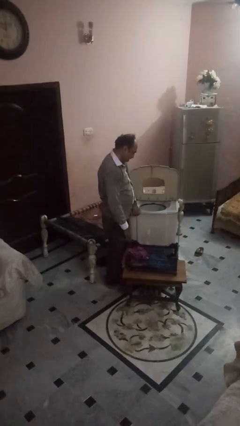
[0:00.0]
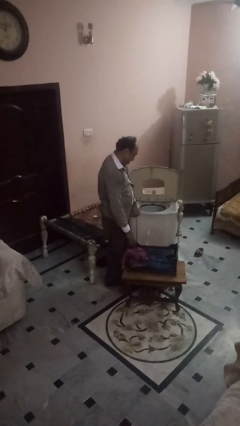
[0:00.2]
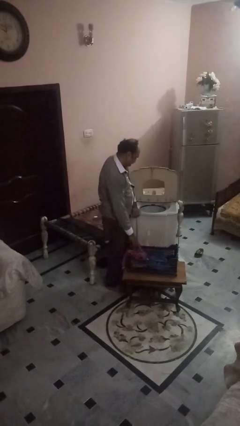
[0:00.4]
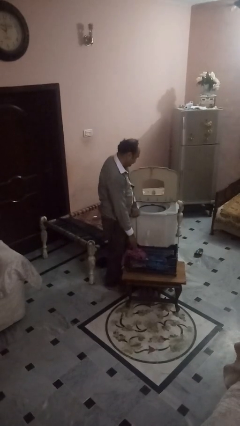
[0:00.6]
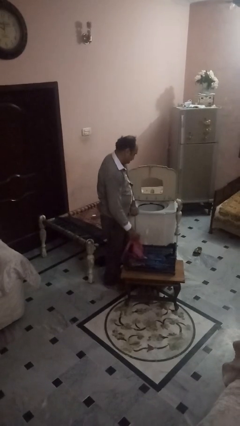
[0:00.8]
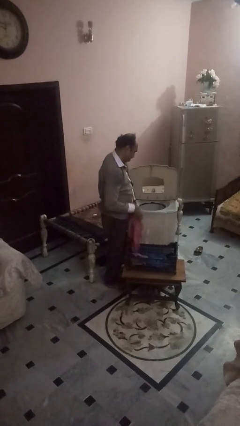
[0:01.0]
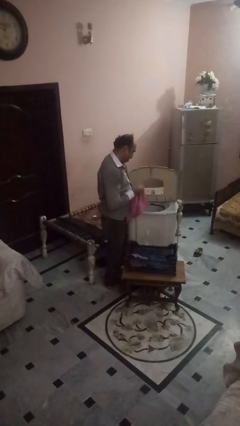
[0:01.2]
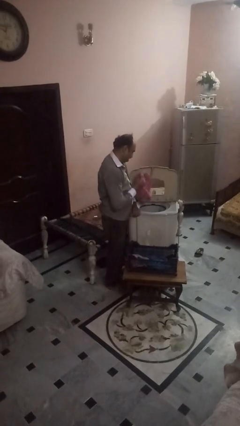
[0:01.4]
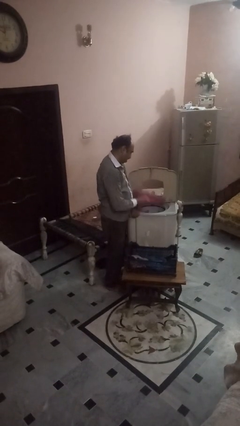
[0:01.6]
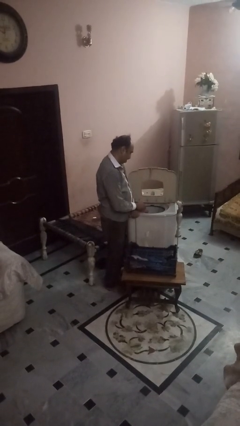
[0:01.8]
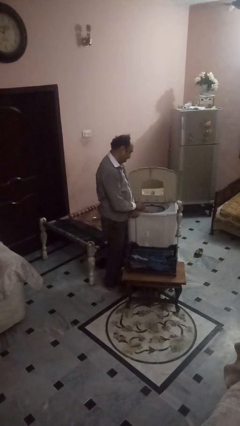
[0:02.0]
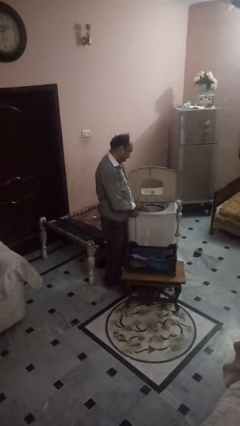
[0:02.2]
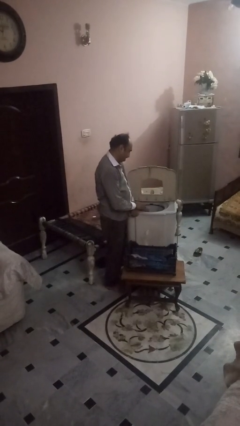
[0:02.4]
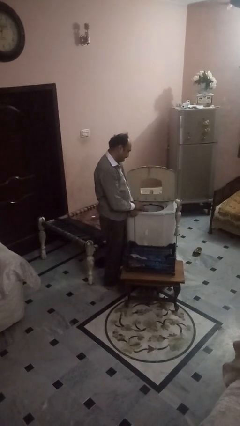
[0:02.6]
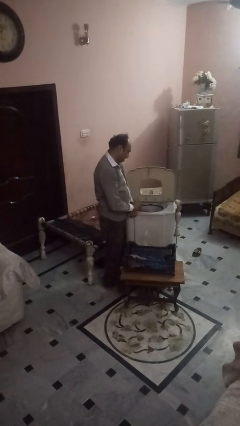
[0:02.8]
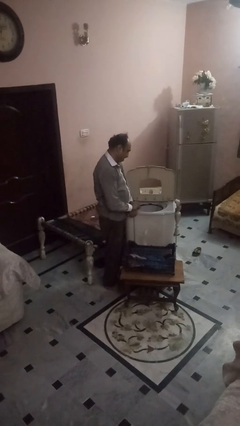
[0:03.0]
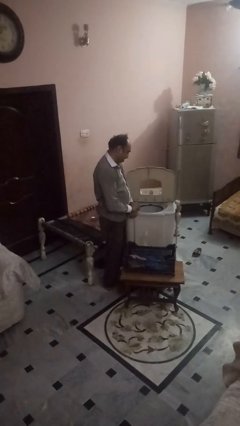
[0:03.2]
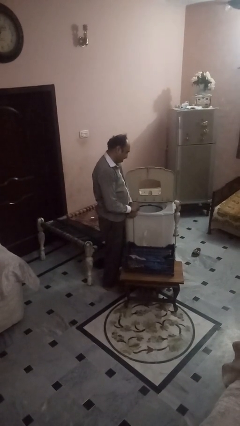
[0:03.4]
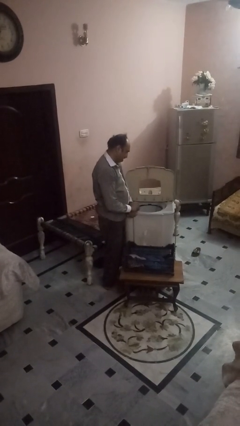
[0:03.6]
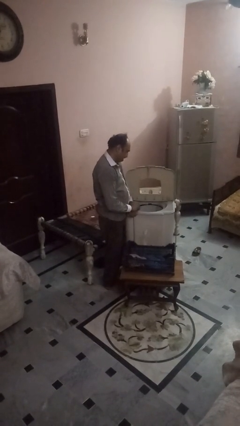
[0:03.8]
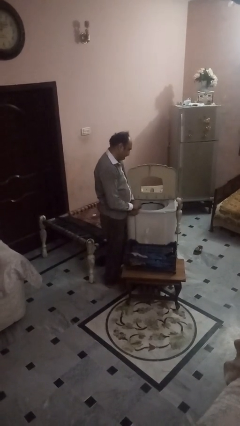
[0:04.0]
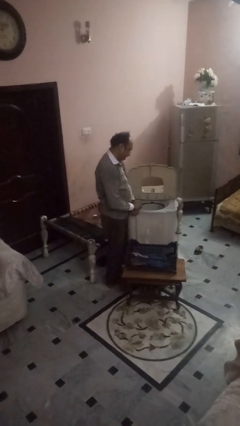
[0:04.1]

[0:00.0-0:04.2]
person loads dryer

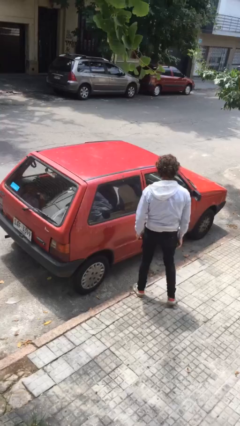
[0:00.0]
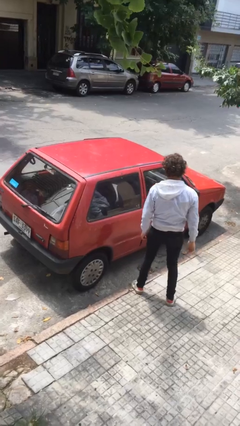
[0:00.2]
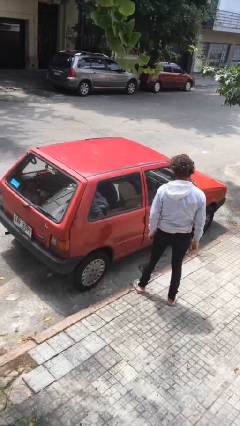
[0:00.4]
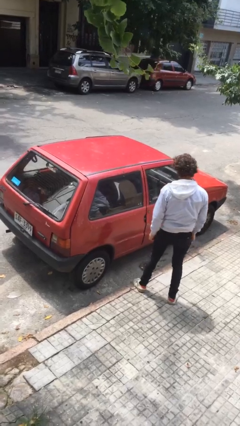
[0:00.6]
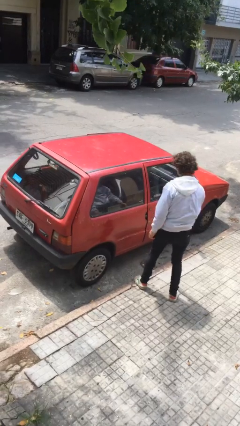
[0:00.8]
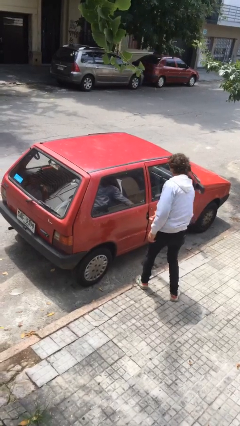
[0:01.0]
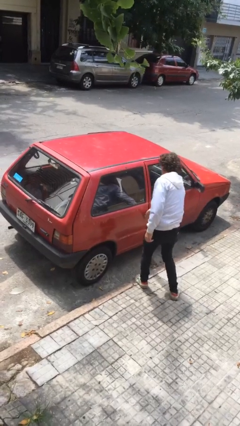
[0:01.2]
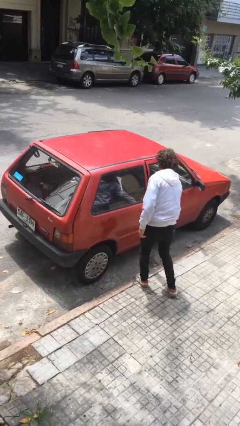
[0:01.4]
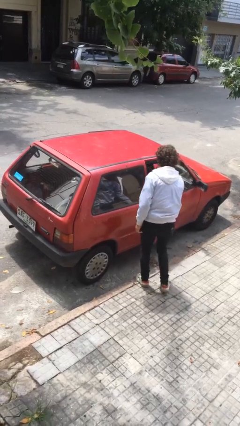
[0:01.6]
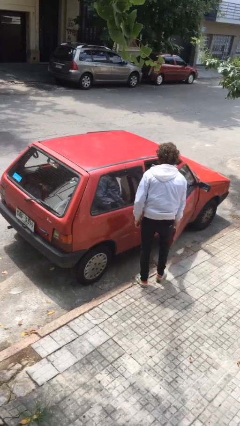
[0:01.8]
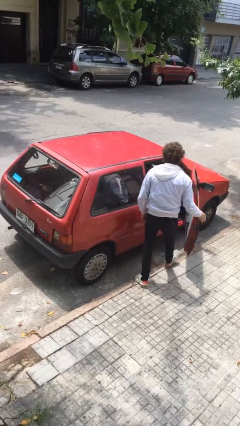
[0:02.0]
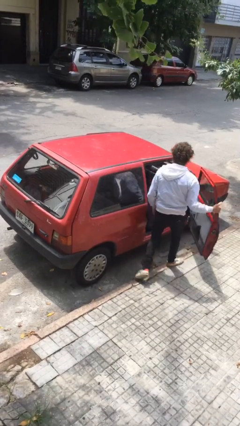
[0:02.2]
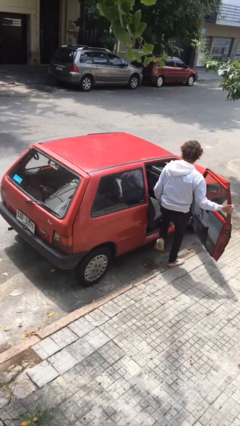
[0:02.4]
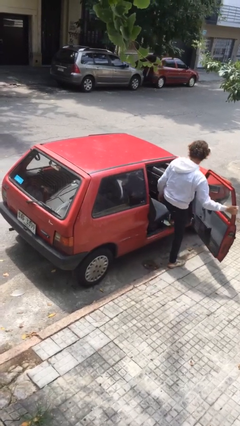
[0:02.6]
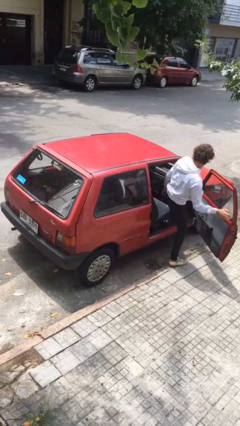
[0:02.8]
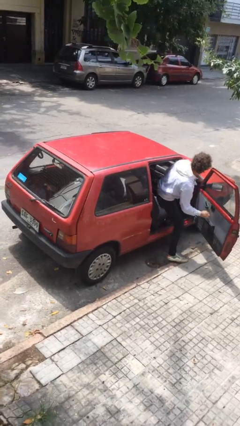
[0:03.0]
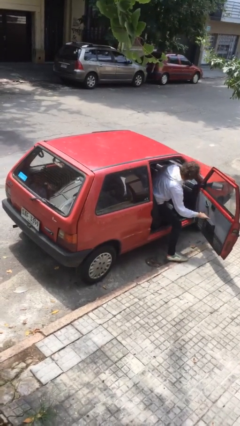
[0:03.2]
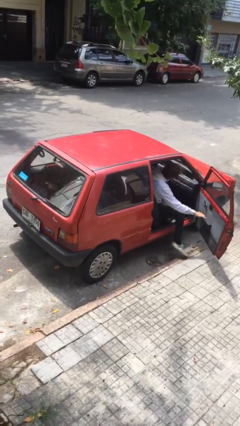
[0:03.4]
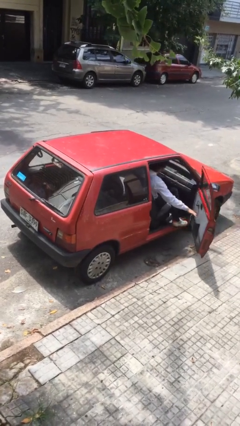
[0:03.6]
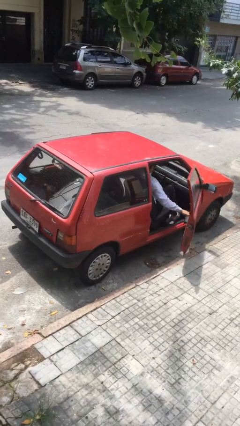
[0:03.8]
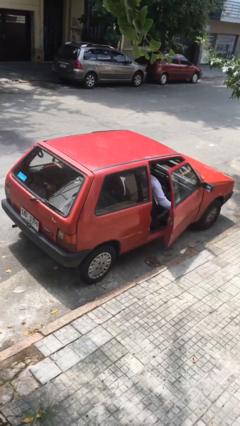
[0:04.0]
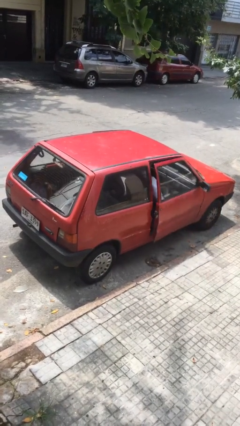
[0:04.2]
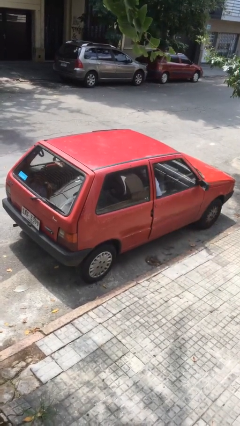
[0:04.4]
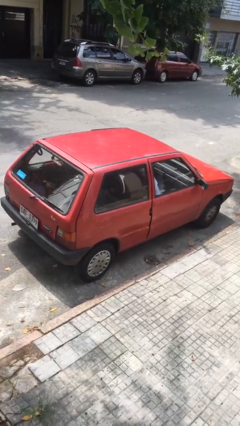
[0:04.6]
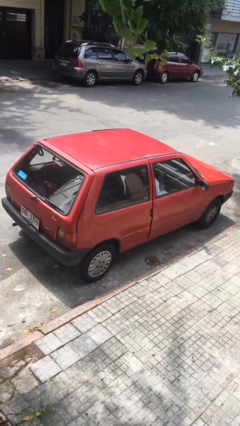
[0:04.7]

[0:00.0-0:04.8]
car picks up person

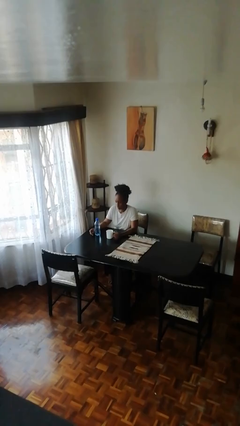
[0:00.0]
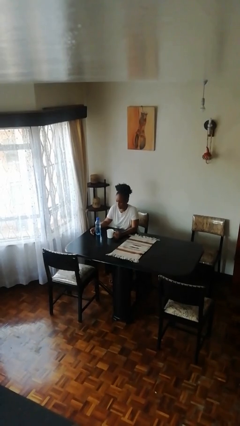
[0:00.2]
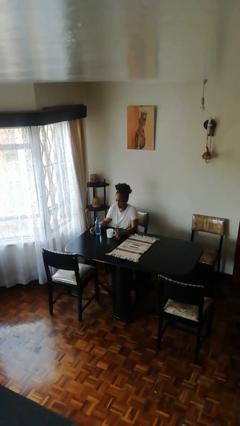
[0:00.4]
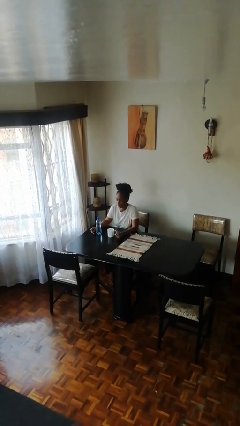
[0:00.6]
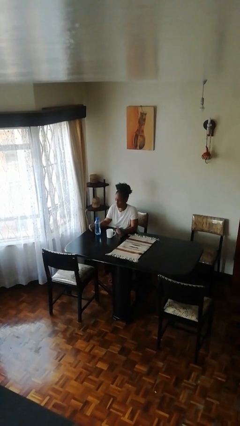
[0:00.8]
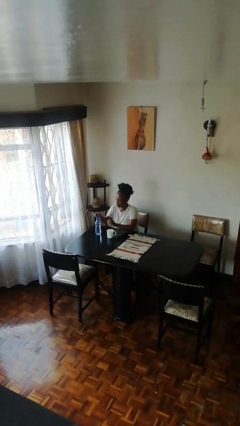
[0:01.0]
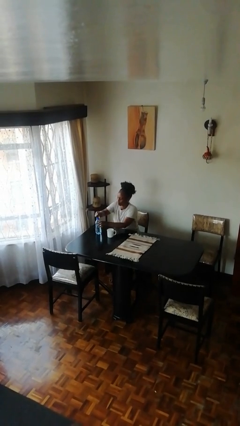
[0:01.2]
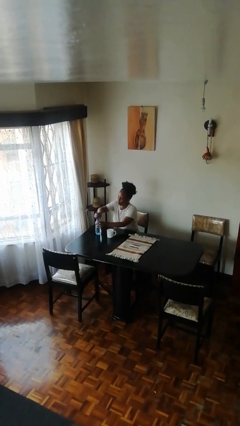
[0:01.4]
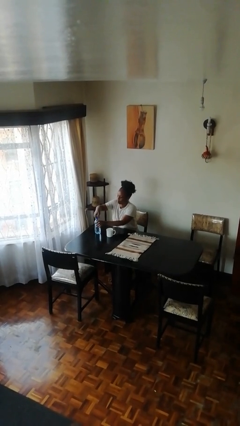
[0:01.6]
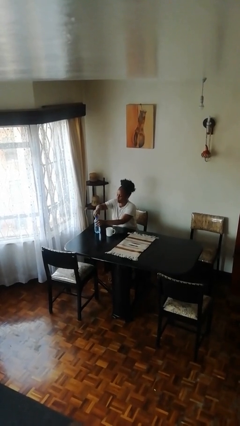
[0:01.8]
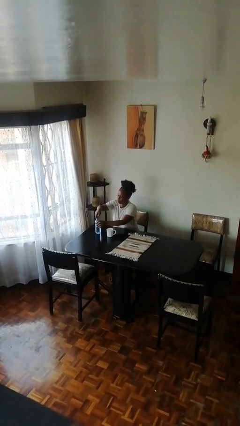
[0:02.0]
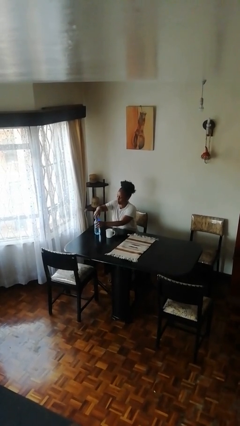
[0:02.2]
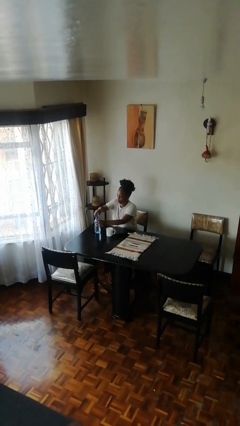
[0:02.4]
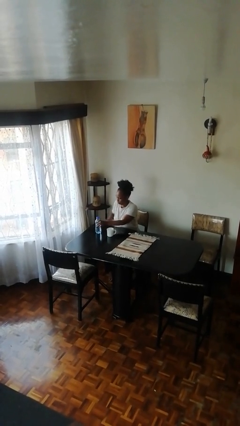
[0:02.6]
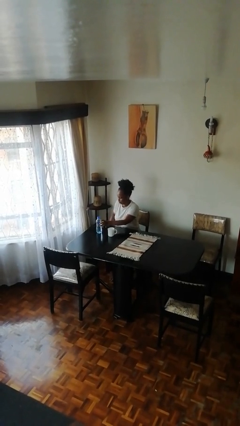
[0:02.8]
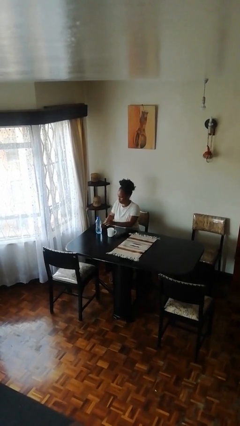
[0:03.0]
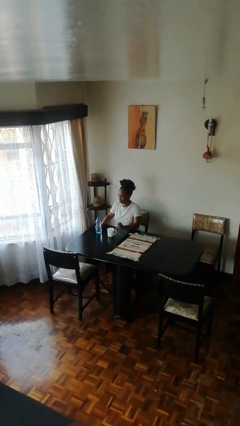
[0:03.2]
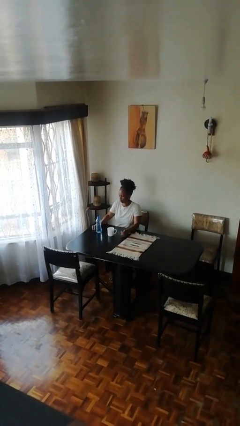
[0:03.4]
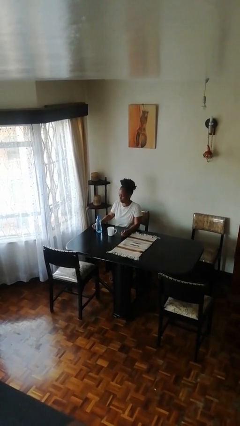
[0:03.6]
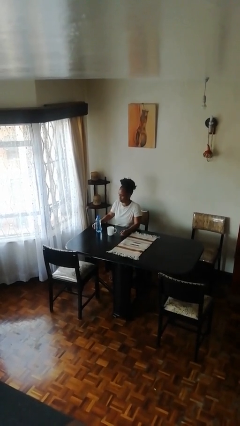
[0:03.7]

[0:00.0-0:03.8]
person unscrews lid from bottle

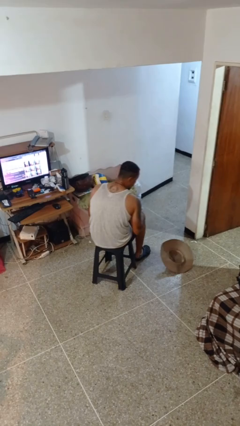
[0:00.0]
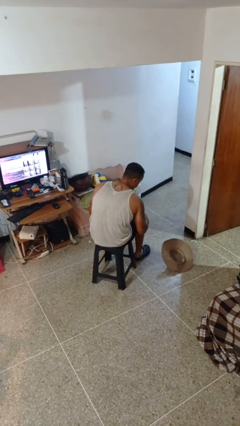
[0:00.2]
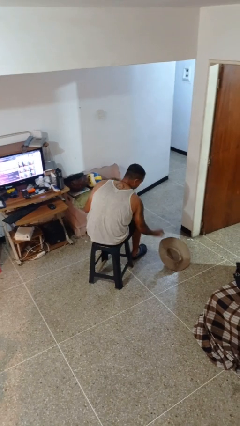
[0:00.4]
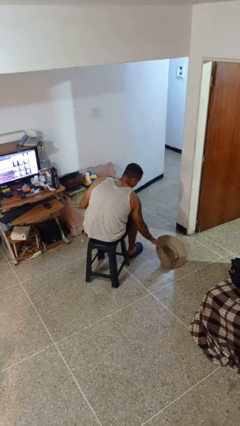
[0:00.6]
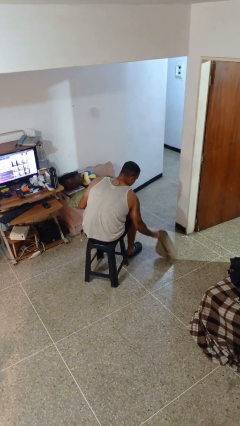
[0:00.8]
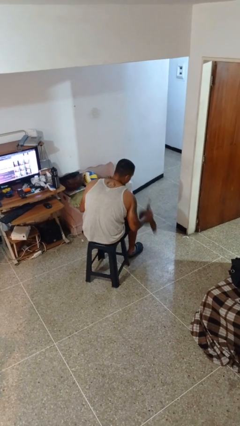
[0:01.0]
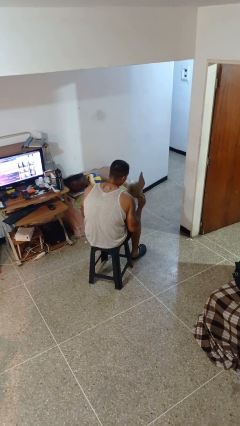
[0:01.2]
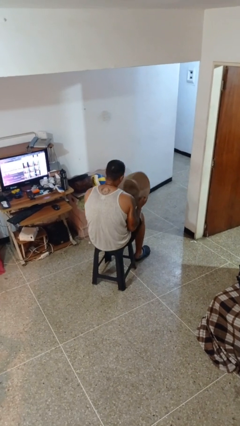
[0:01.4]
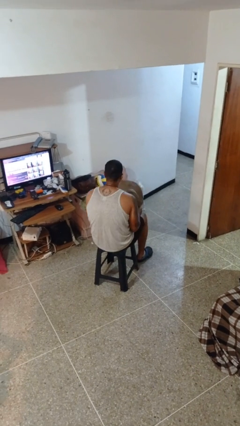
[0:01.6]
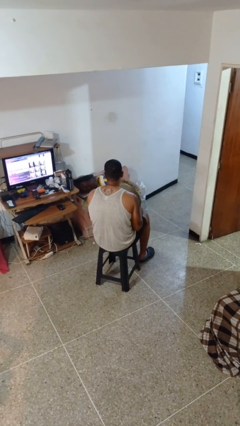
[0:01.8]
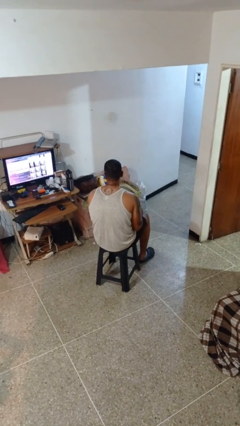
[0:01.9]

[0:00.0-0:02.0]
person picks up object from floor

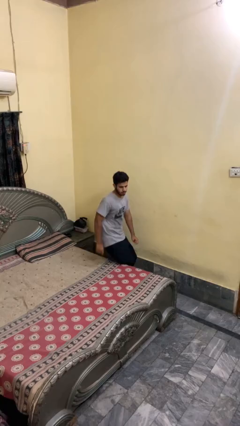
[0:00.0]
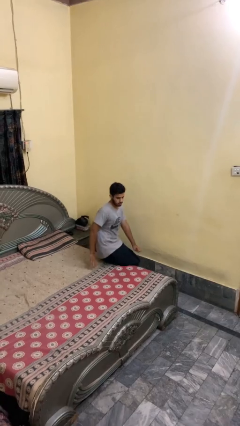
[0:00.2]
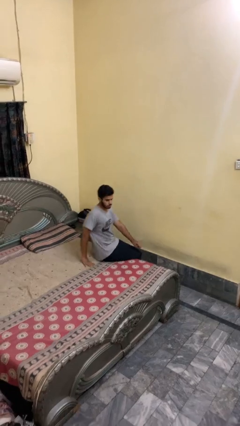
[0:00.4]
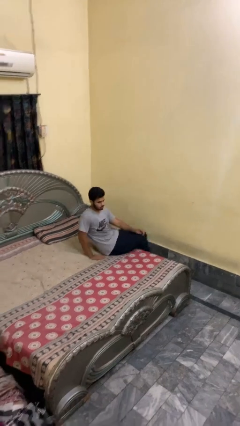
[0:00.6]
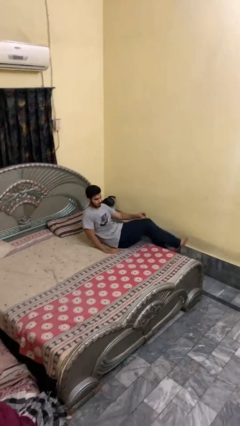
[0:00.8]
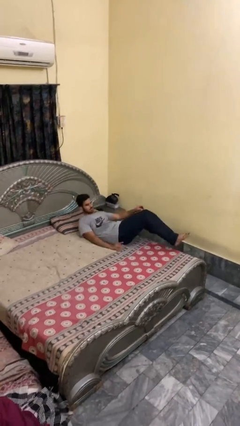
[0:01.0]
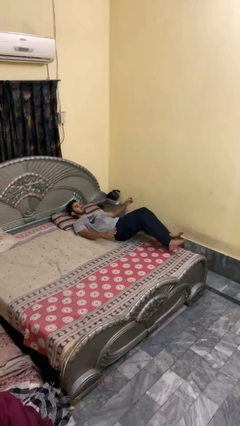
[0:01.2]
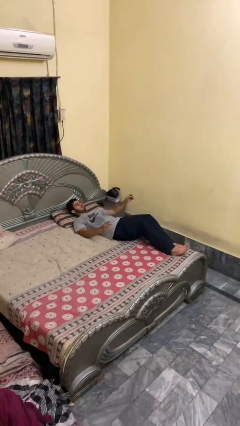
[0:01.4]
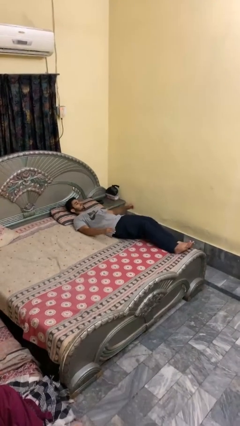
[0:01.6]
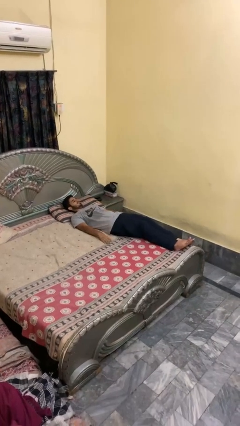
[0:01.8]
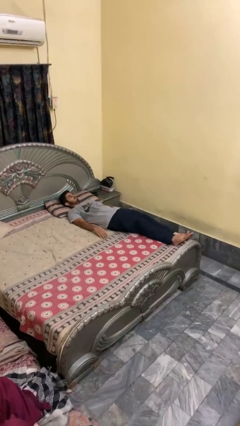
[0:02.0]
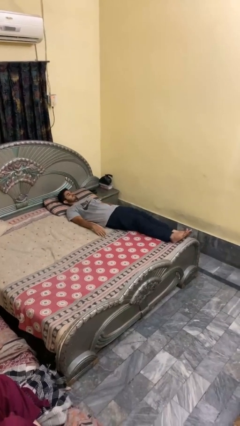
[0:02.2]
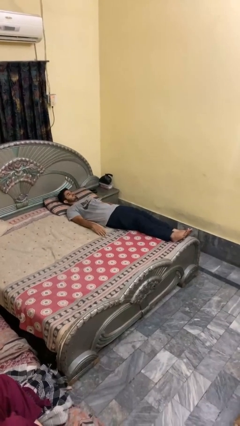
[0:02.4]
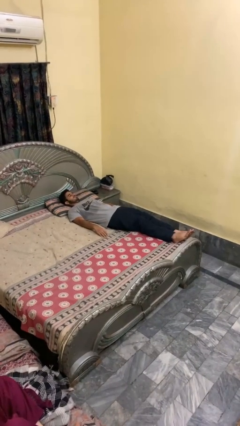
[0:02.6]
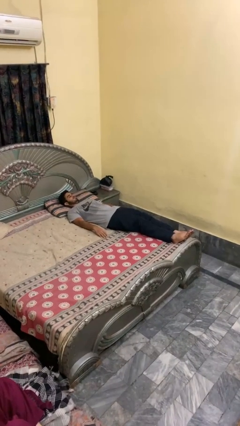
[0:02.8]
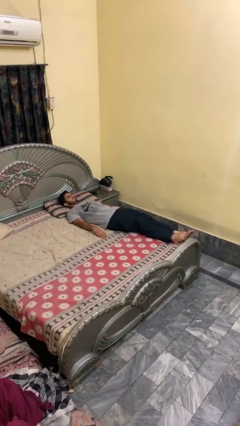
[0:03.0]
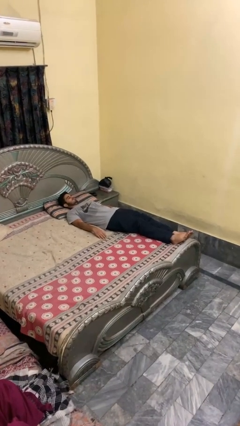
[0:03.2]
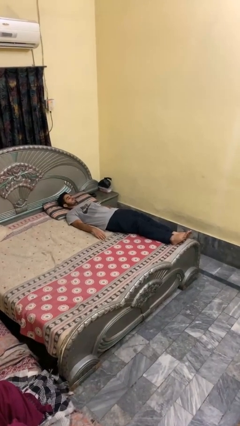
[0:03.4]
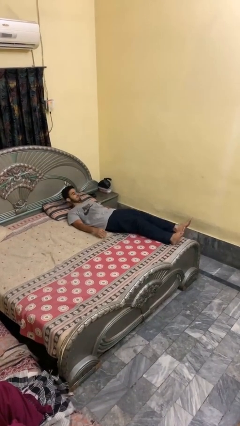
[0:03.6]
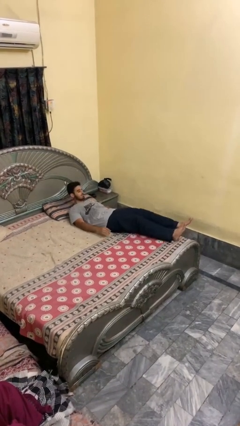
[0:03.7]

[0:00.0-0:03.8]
person lies down on bed
